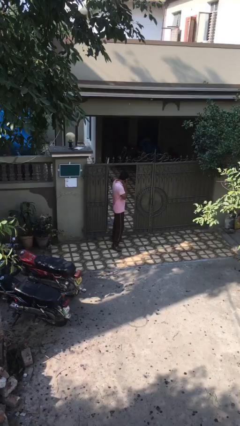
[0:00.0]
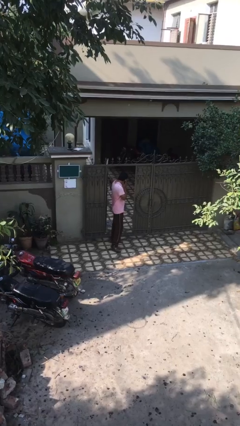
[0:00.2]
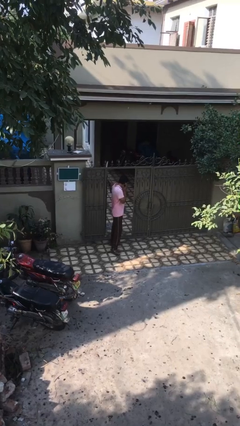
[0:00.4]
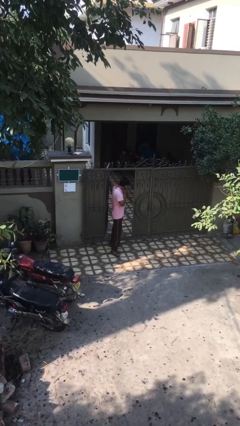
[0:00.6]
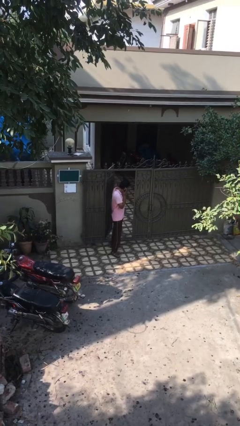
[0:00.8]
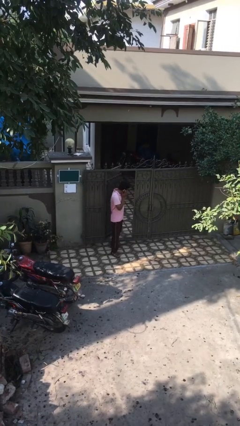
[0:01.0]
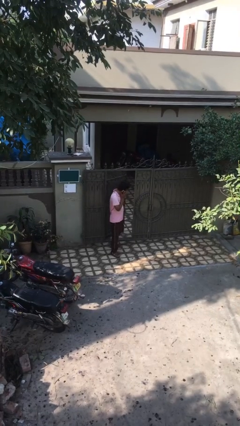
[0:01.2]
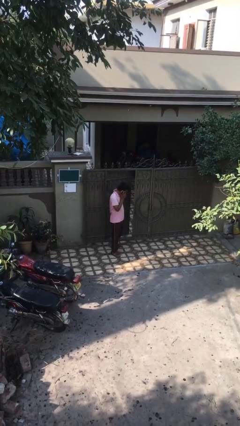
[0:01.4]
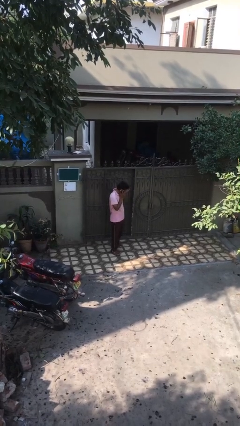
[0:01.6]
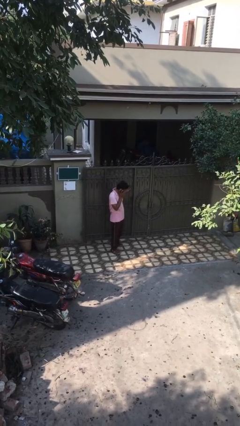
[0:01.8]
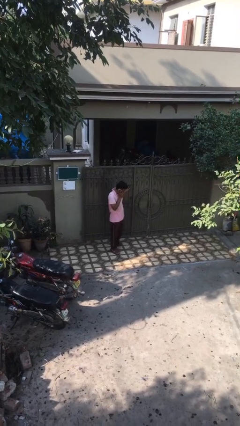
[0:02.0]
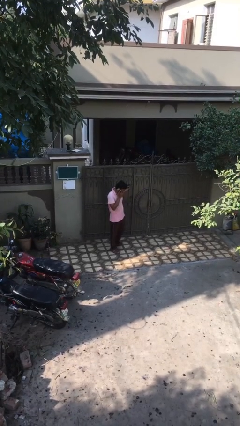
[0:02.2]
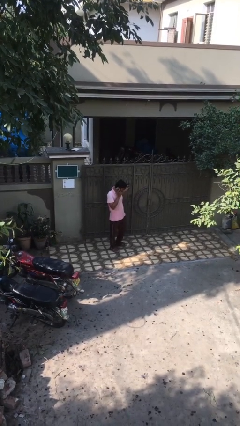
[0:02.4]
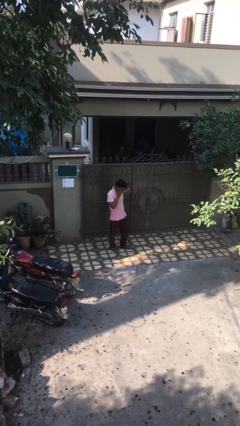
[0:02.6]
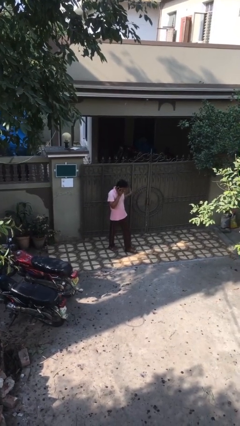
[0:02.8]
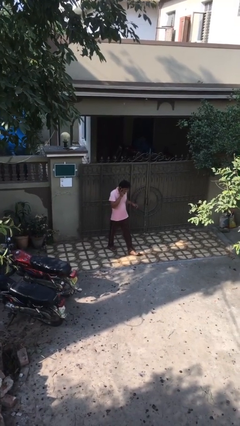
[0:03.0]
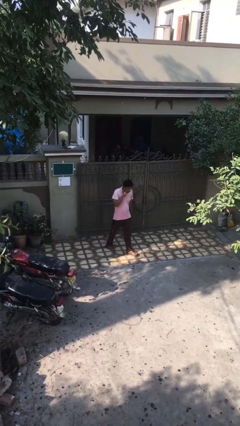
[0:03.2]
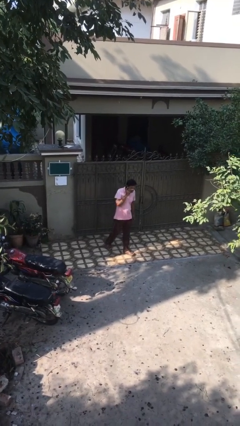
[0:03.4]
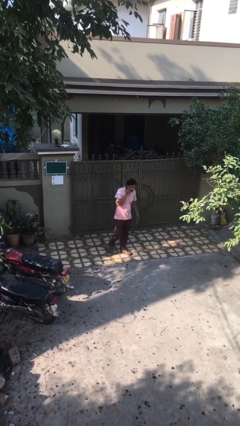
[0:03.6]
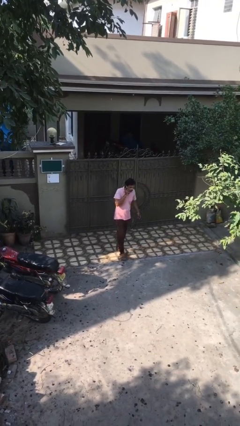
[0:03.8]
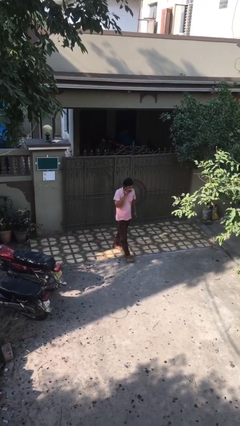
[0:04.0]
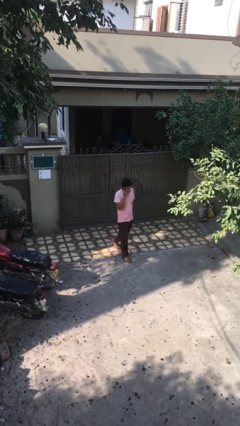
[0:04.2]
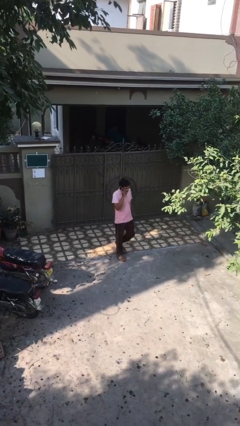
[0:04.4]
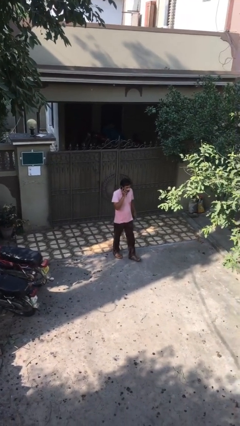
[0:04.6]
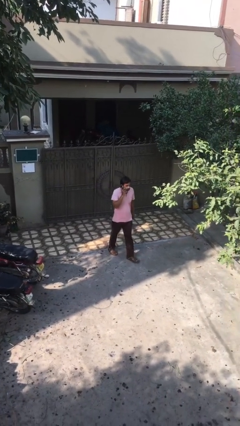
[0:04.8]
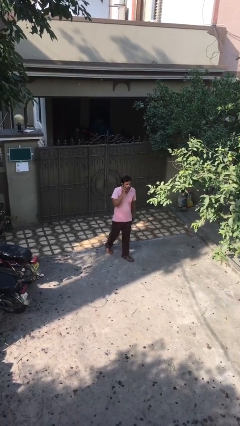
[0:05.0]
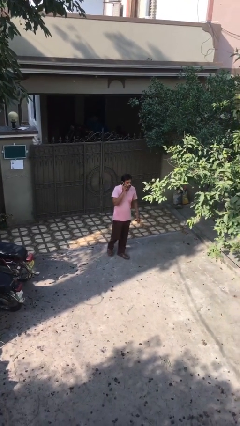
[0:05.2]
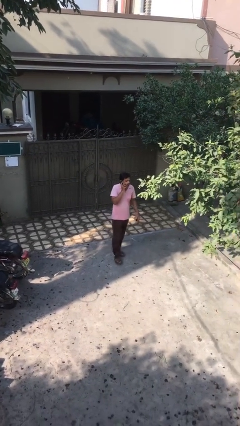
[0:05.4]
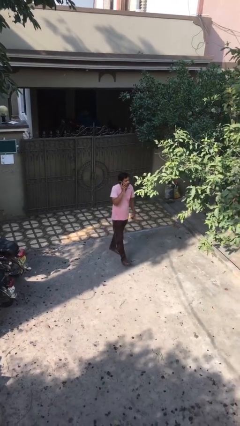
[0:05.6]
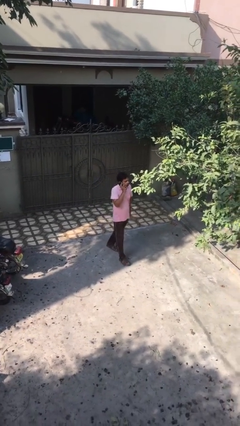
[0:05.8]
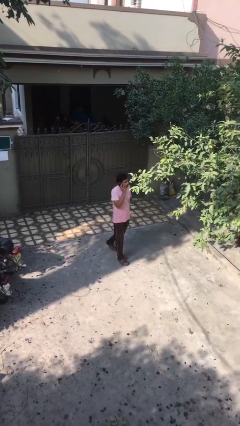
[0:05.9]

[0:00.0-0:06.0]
person closes facility door

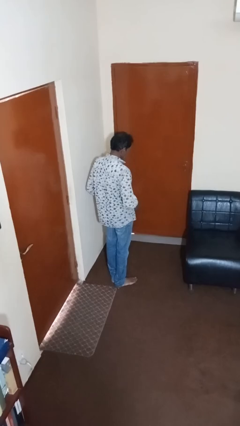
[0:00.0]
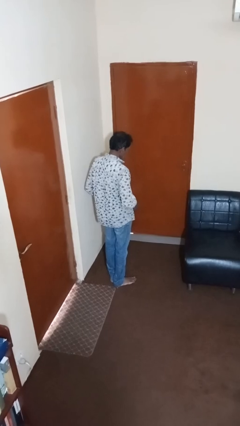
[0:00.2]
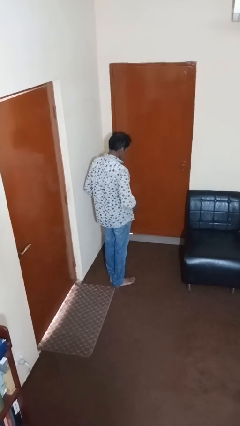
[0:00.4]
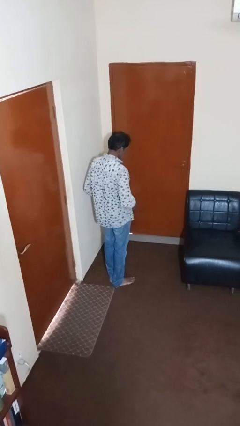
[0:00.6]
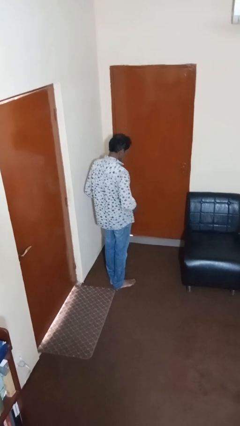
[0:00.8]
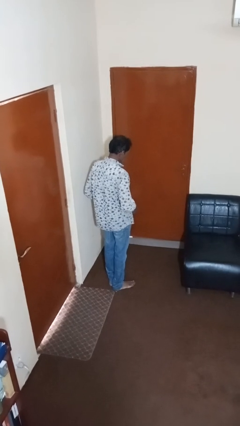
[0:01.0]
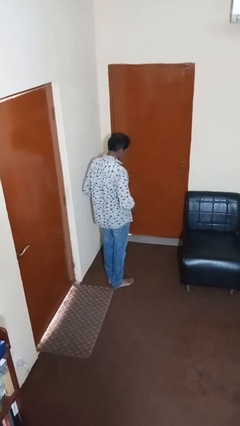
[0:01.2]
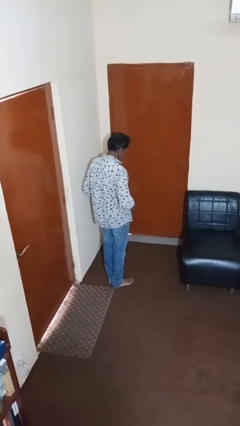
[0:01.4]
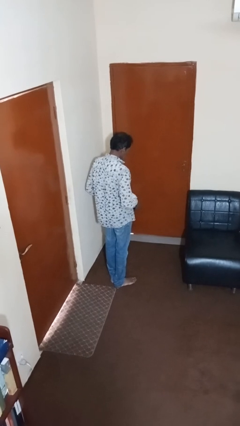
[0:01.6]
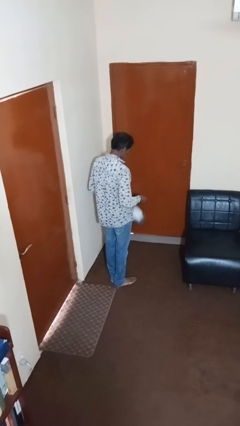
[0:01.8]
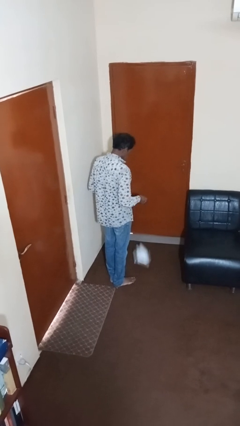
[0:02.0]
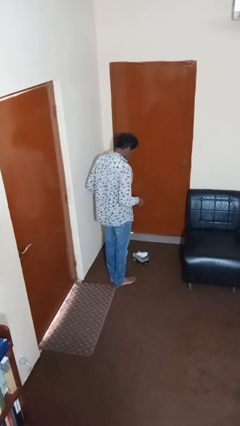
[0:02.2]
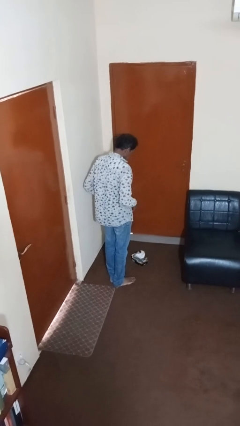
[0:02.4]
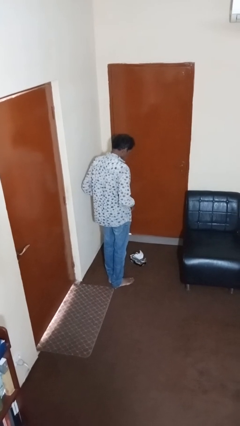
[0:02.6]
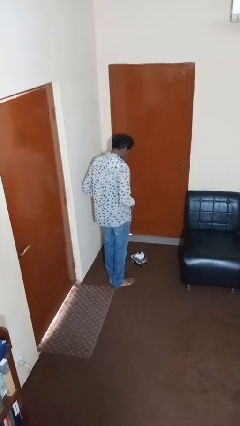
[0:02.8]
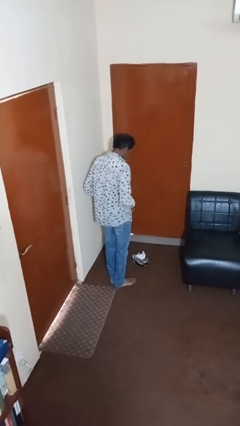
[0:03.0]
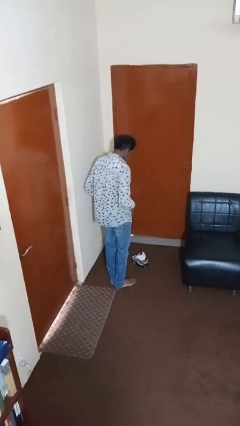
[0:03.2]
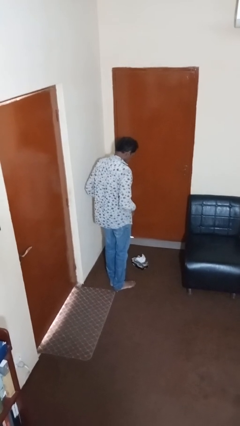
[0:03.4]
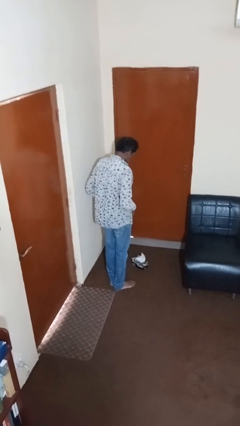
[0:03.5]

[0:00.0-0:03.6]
person drops object

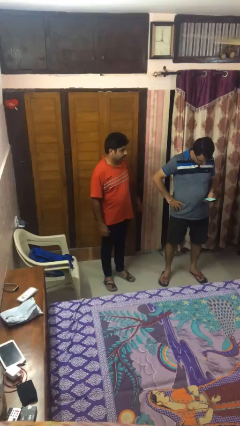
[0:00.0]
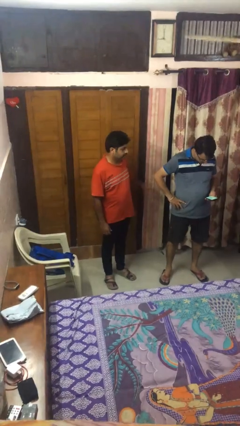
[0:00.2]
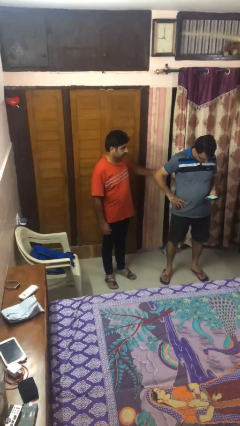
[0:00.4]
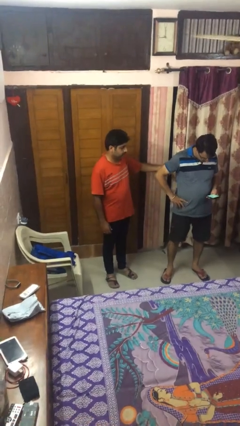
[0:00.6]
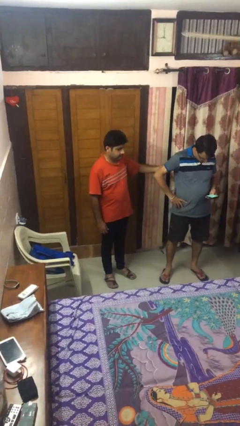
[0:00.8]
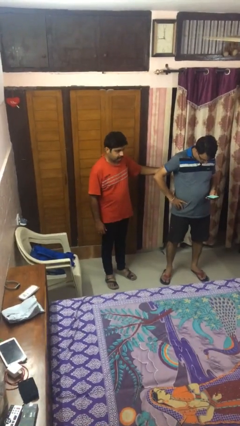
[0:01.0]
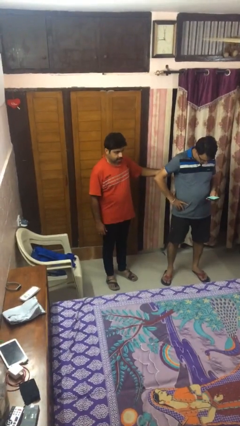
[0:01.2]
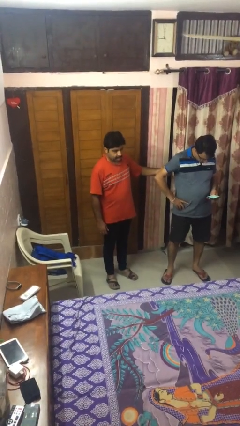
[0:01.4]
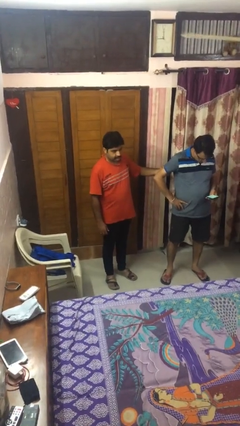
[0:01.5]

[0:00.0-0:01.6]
person grabs person by bicep

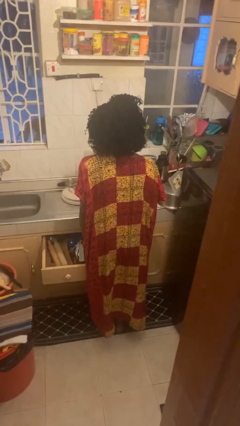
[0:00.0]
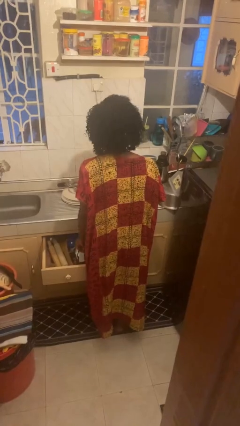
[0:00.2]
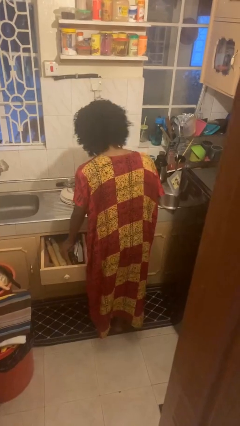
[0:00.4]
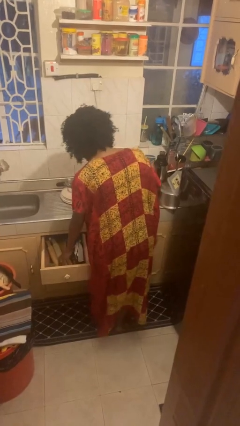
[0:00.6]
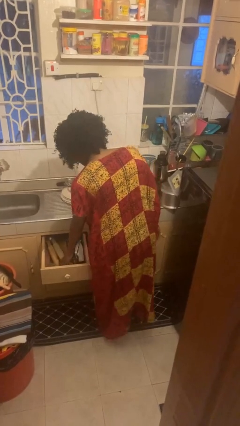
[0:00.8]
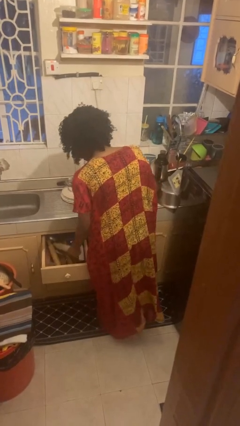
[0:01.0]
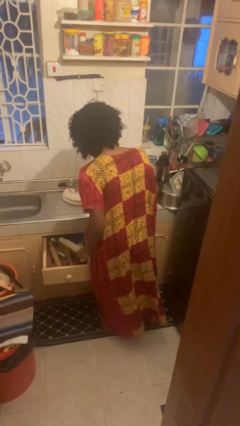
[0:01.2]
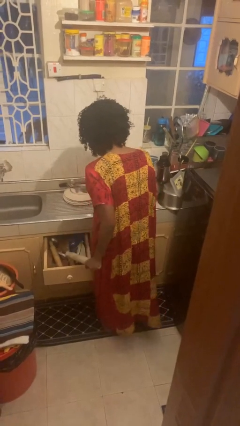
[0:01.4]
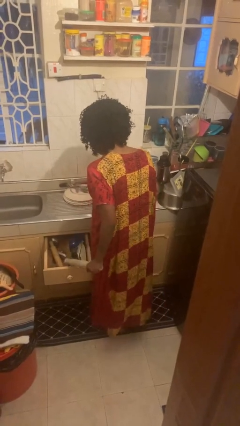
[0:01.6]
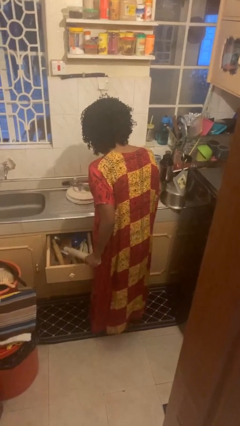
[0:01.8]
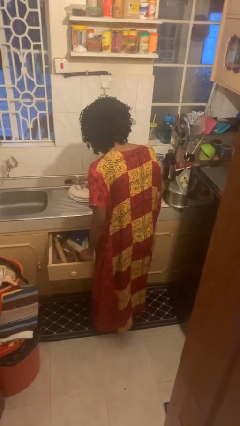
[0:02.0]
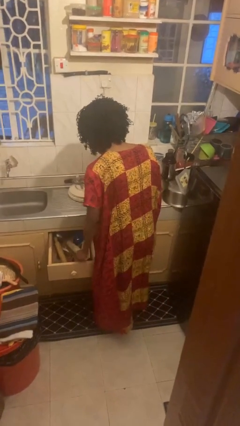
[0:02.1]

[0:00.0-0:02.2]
person takes object from kitchen drawer

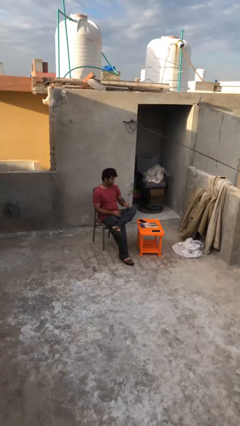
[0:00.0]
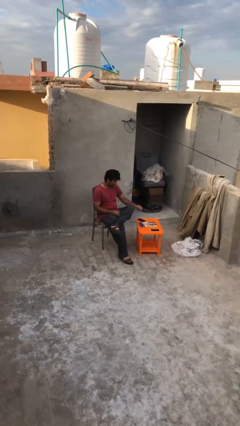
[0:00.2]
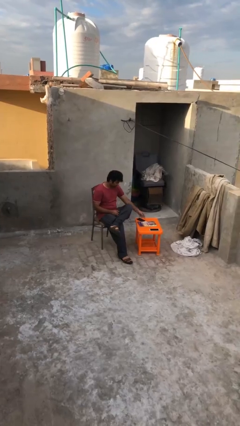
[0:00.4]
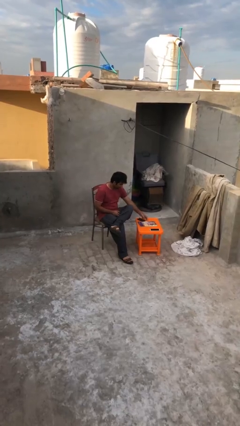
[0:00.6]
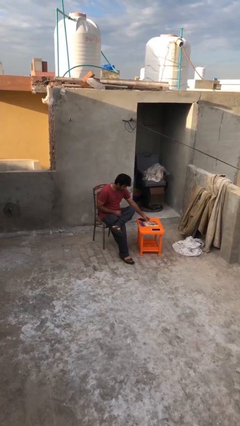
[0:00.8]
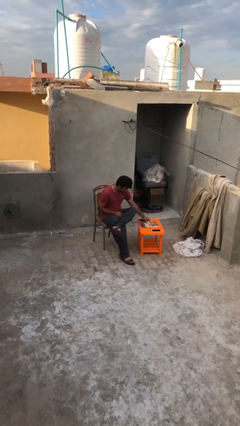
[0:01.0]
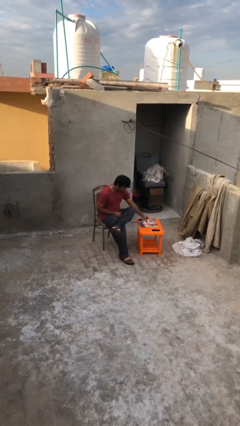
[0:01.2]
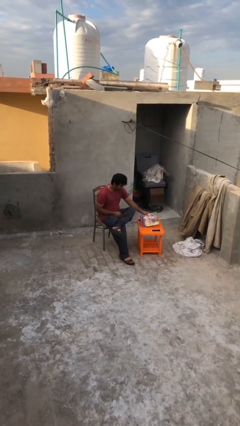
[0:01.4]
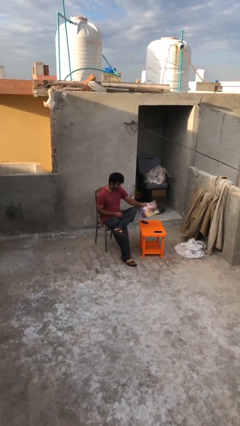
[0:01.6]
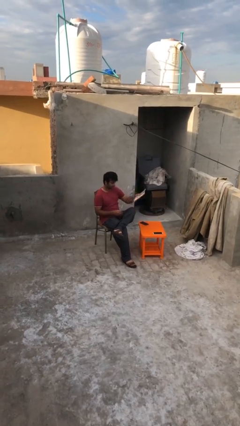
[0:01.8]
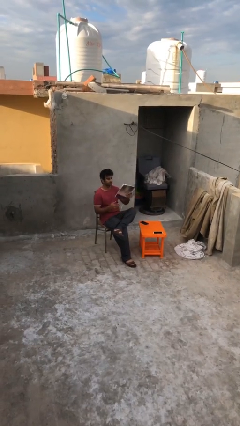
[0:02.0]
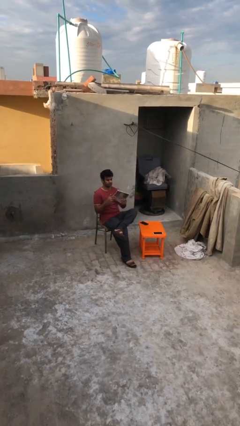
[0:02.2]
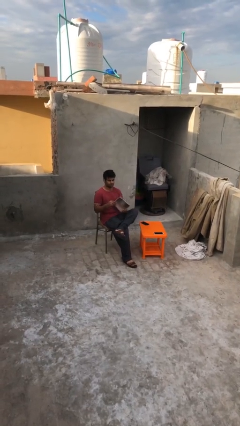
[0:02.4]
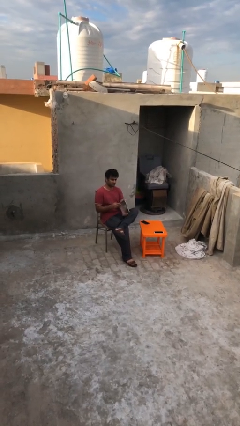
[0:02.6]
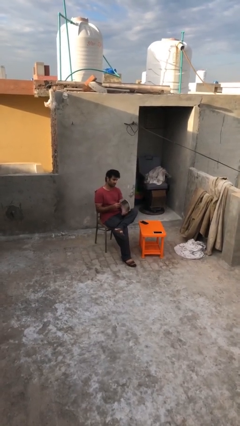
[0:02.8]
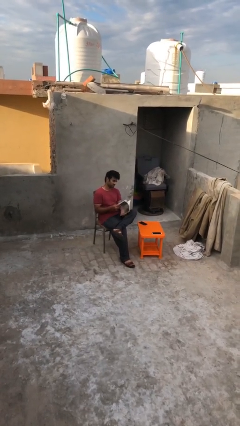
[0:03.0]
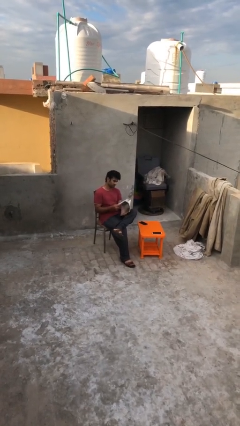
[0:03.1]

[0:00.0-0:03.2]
person picks up object from table

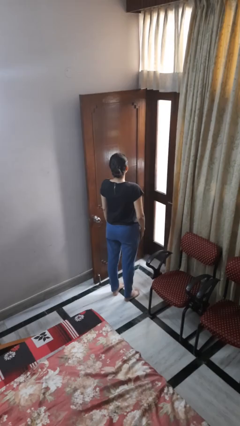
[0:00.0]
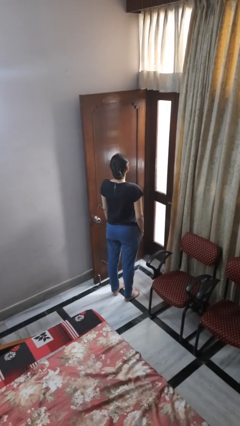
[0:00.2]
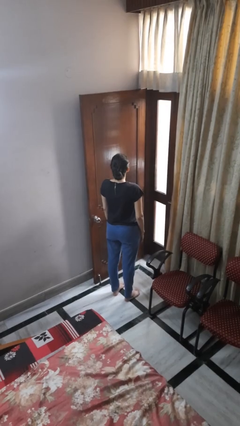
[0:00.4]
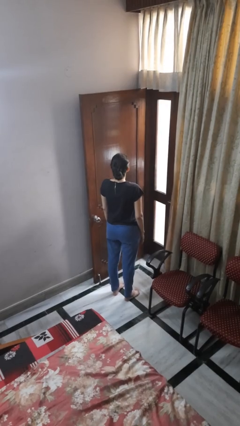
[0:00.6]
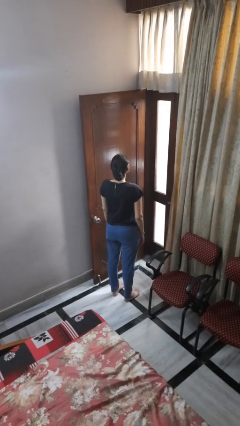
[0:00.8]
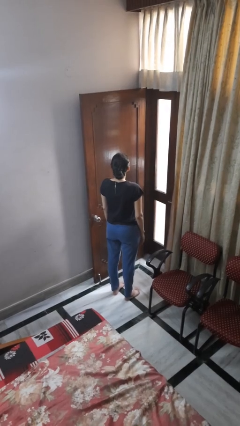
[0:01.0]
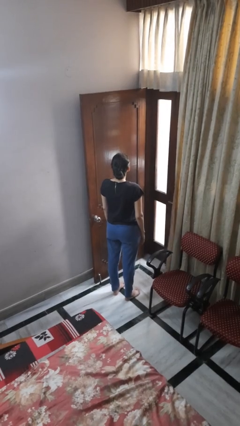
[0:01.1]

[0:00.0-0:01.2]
person slaps hands on thighs
